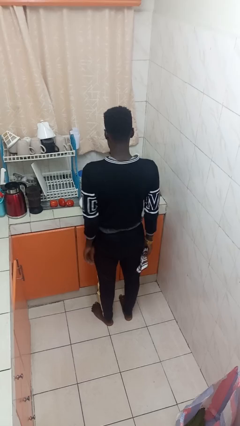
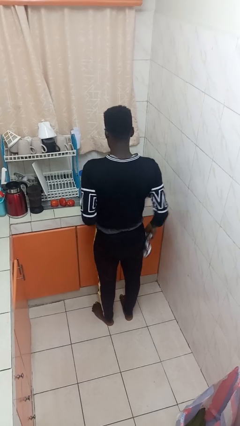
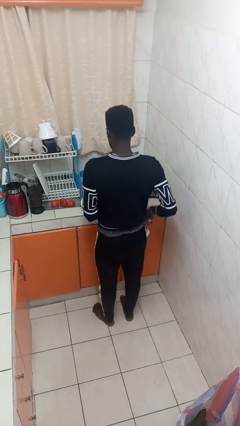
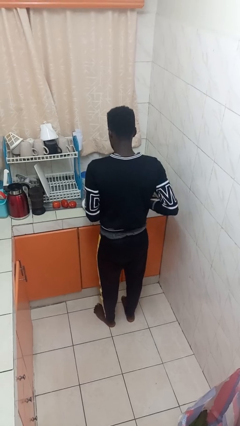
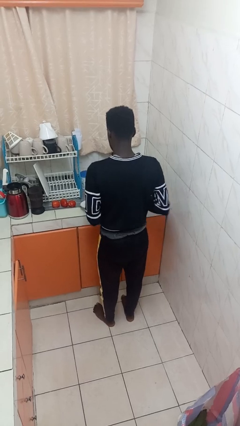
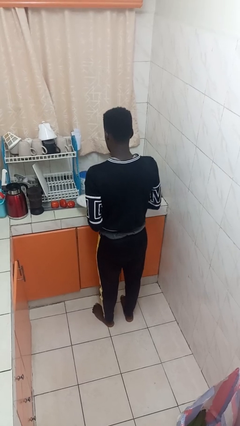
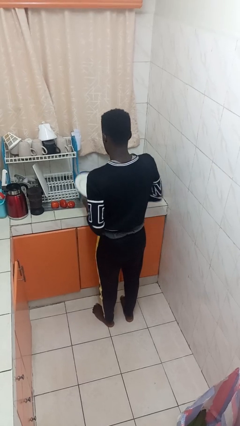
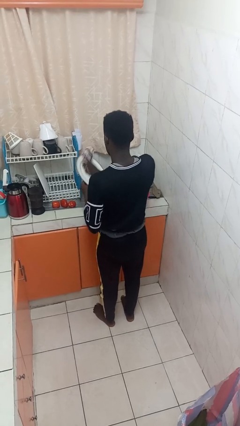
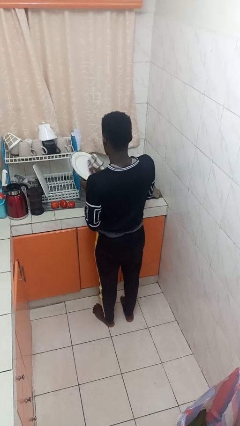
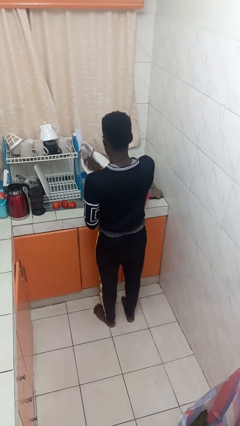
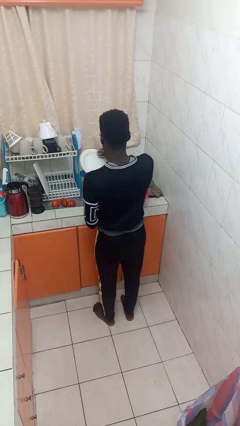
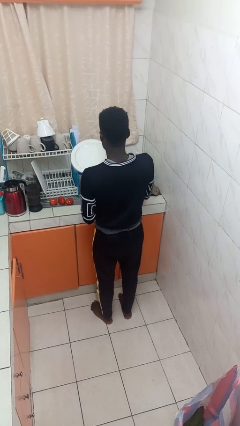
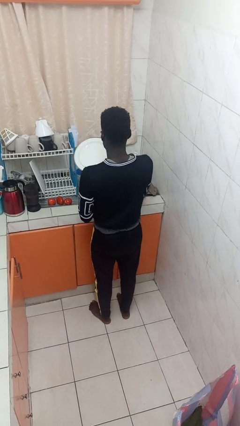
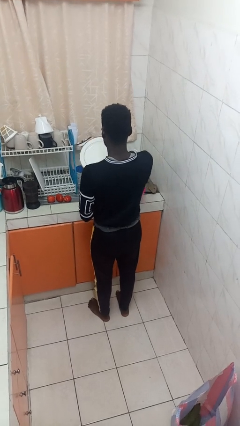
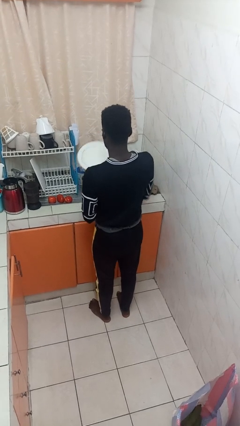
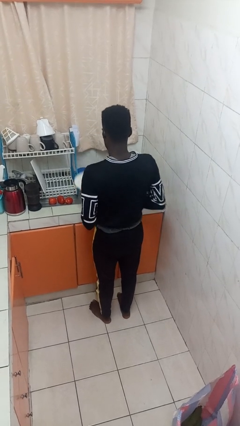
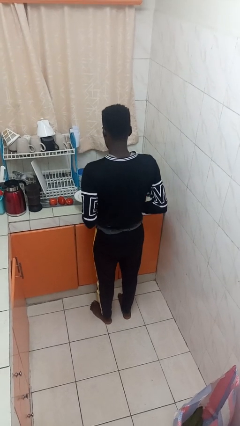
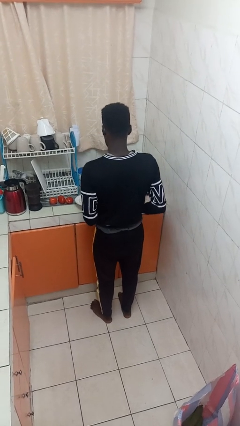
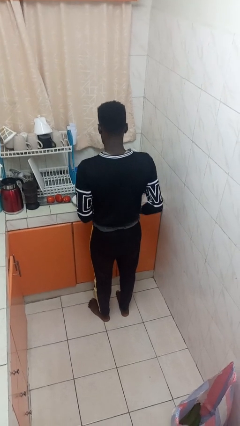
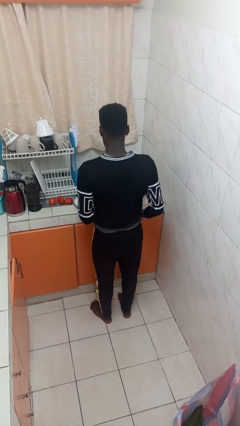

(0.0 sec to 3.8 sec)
person dries dish

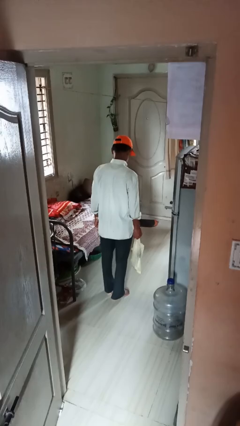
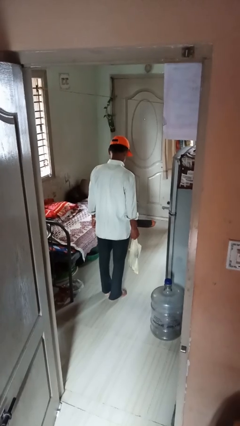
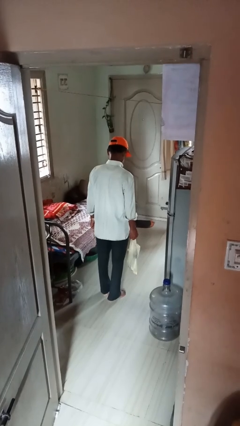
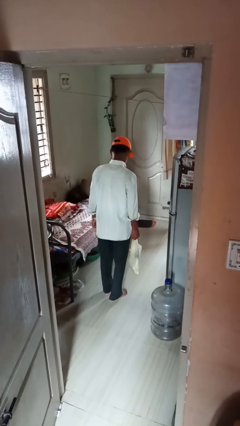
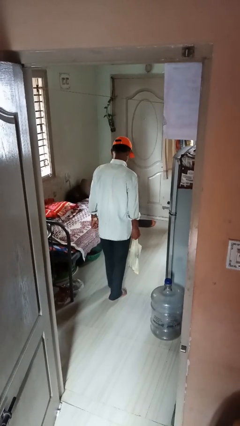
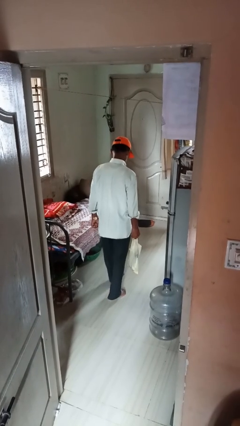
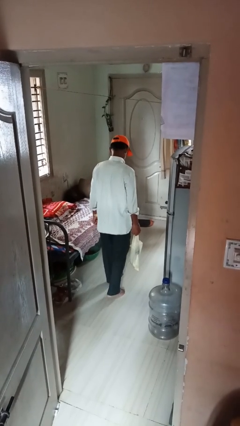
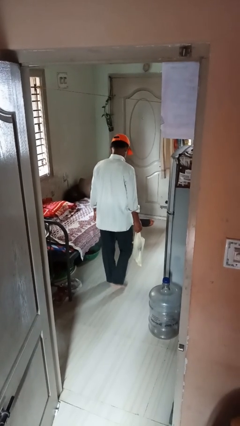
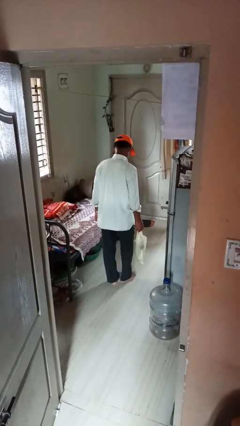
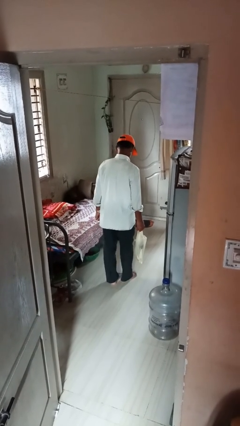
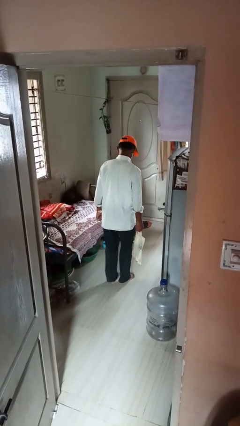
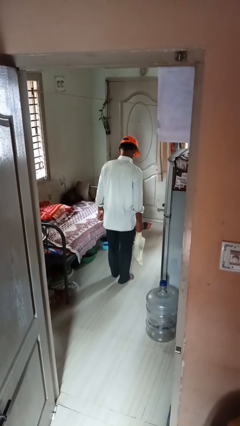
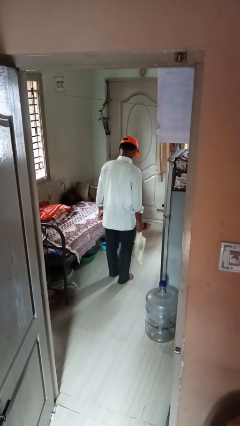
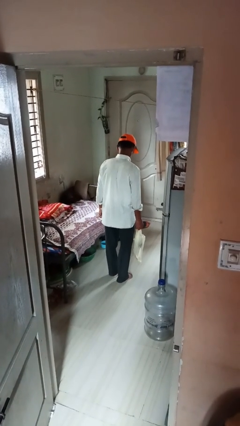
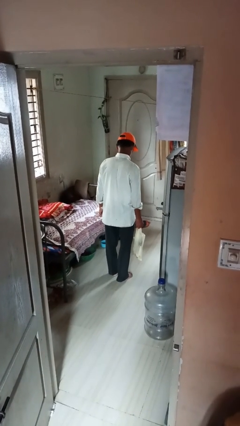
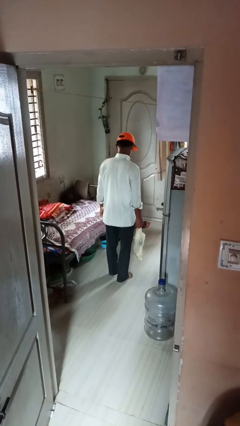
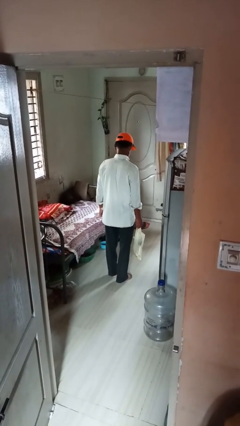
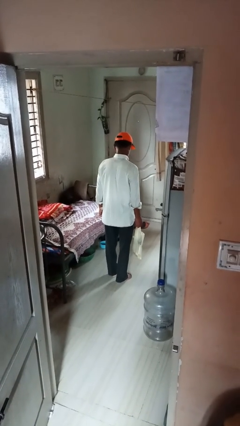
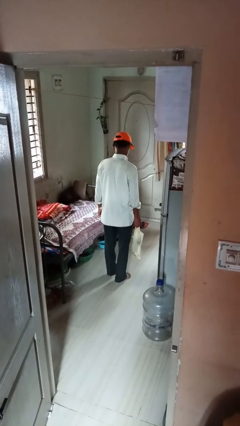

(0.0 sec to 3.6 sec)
person carries groceries

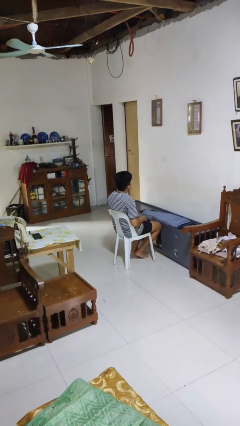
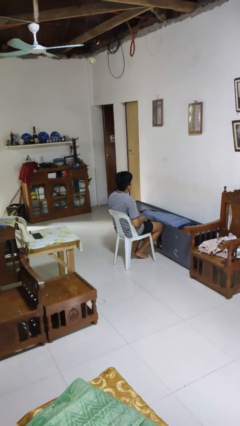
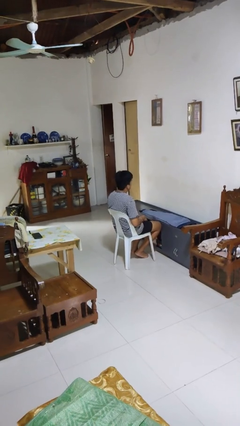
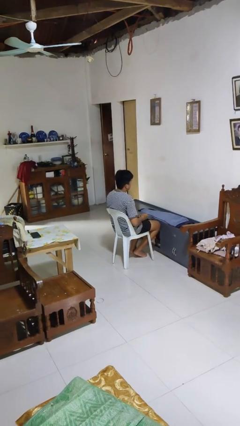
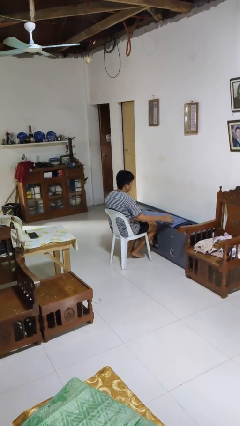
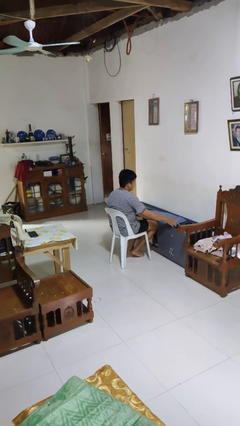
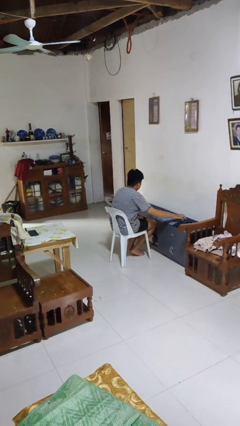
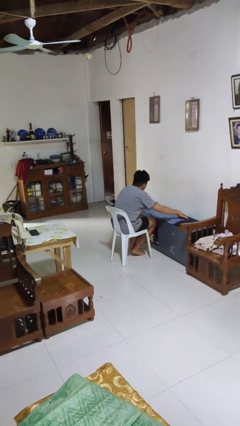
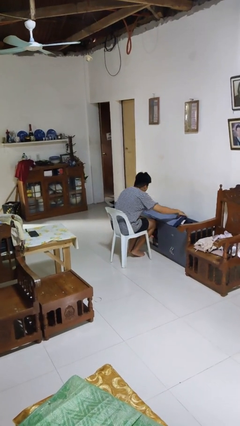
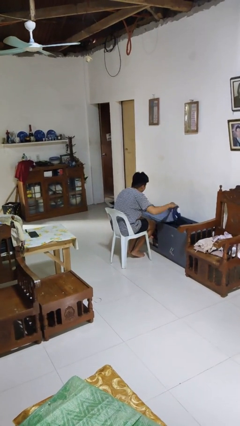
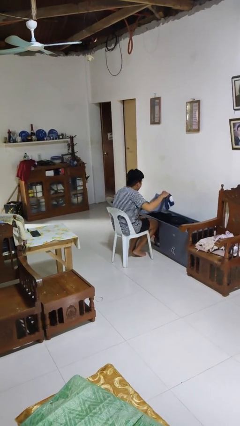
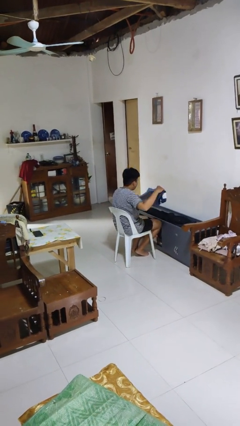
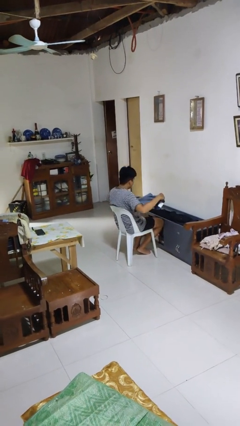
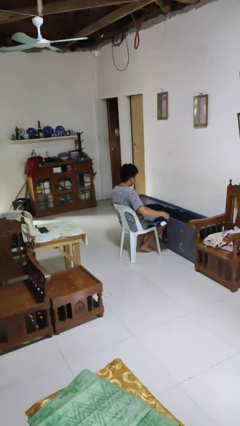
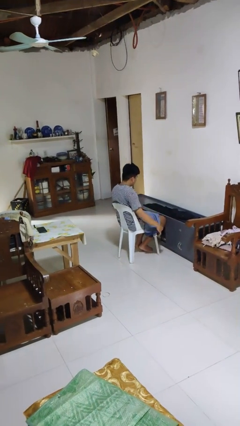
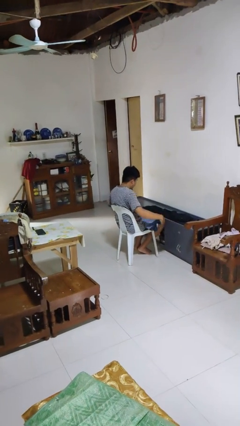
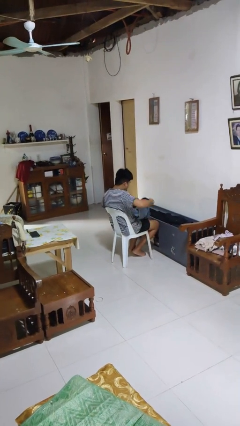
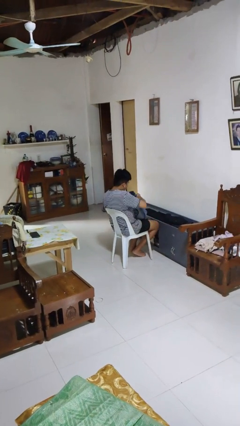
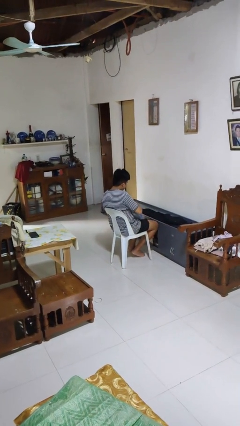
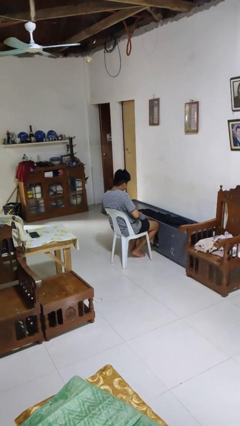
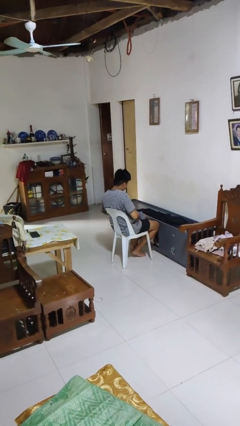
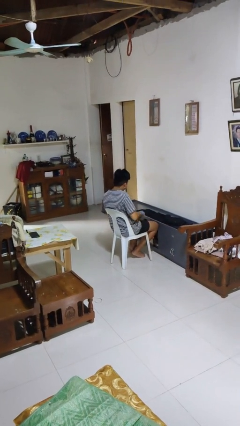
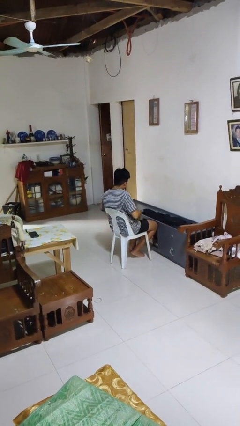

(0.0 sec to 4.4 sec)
person folds pants

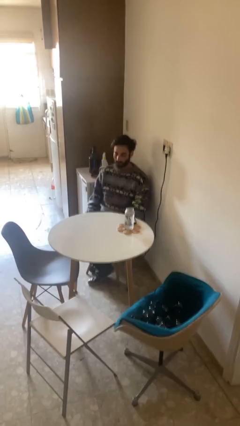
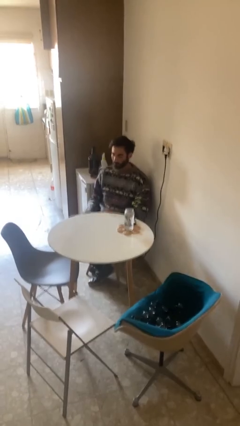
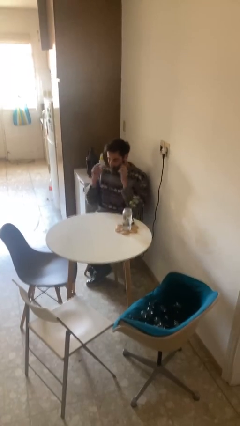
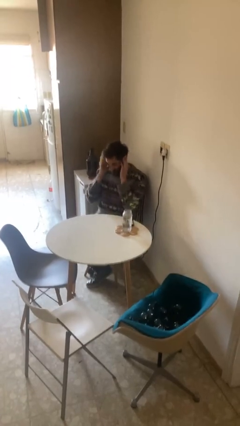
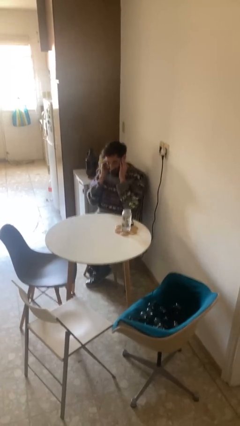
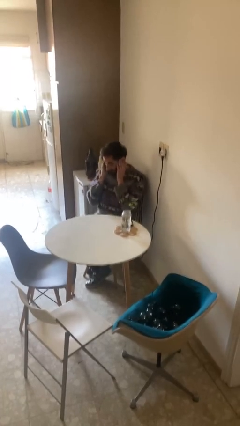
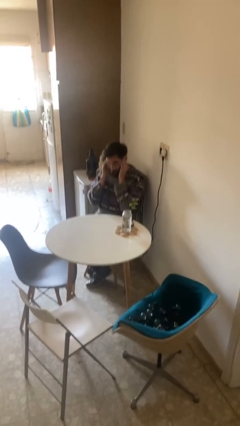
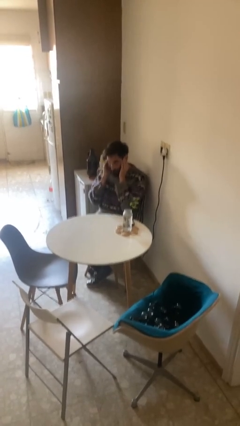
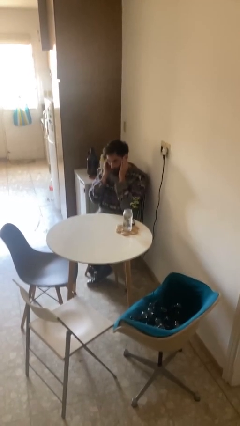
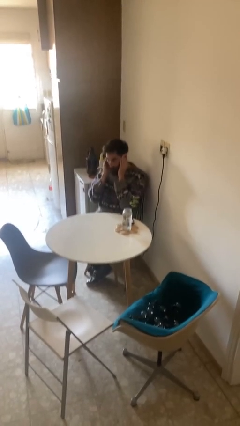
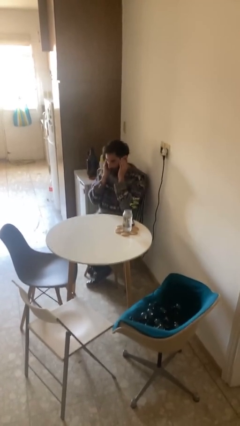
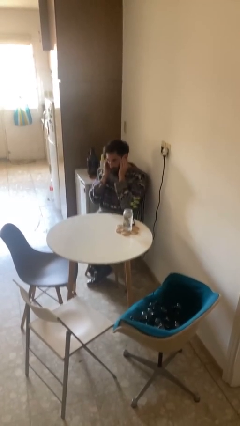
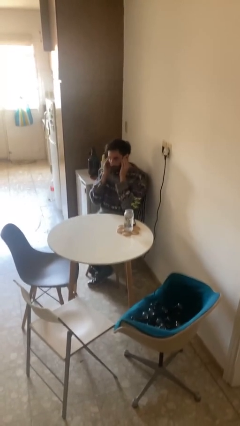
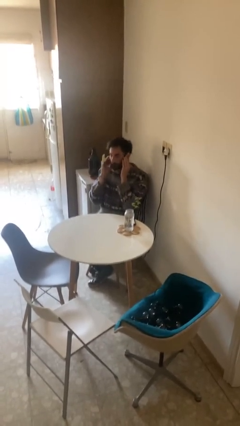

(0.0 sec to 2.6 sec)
person puts fingers in ear

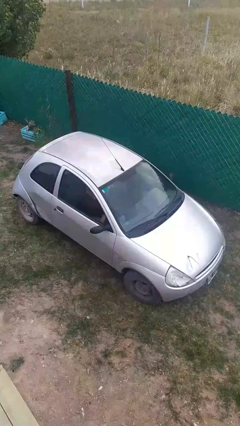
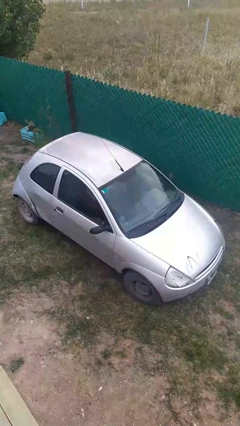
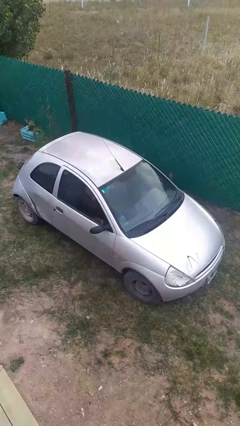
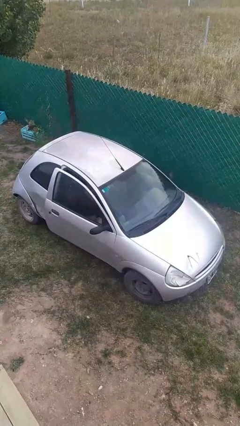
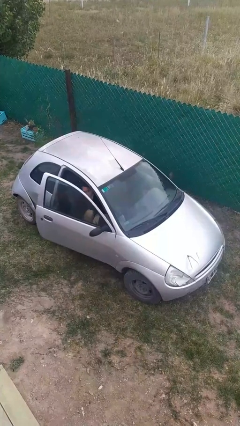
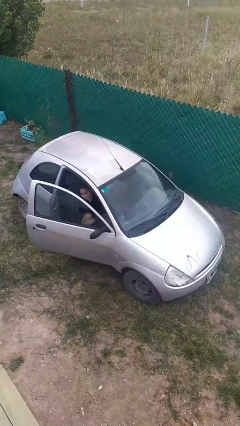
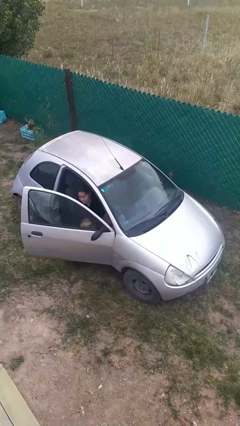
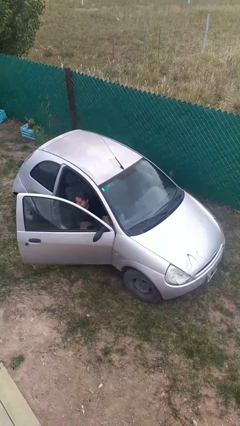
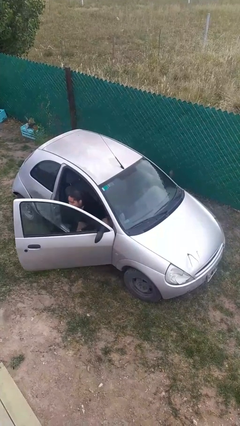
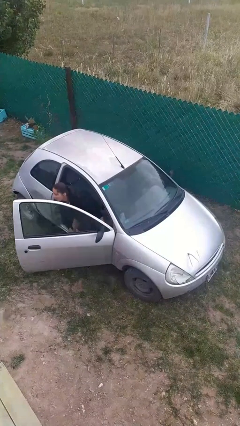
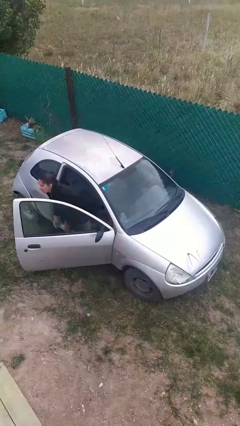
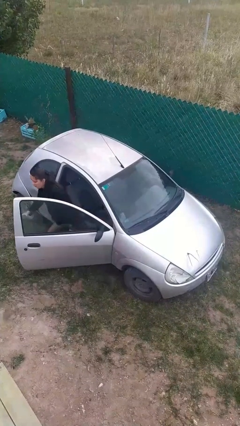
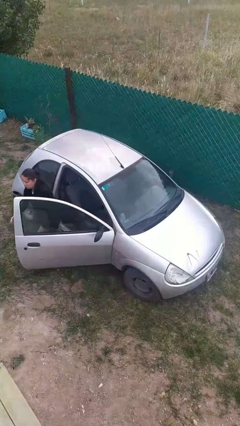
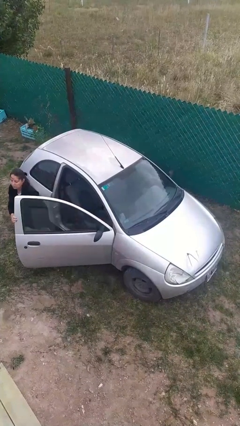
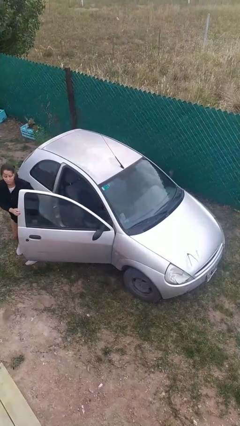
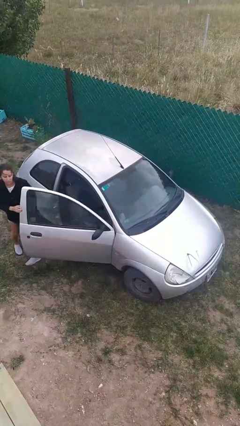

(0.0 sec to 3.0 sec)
car drops off person
